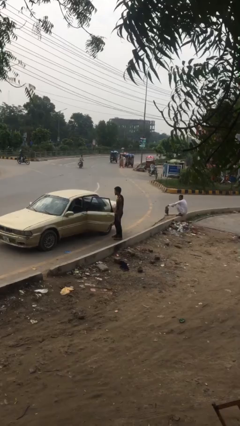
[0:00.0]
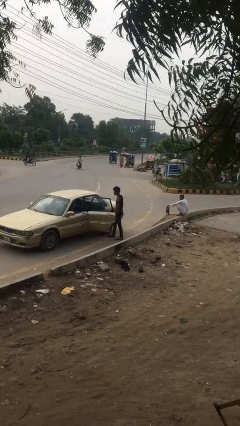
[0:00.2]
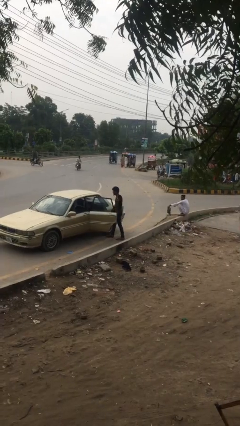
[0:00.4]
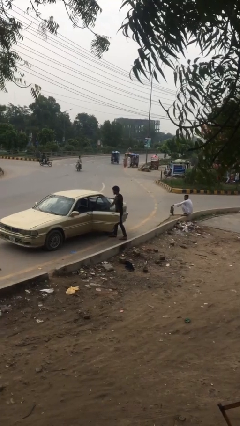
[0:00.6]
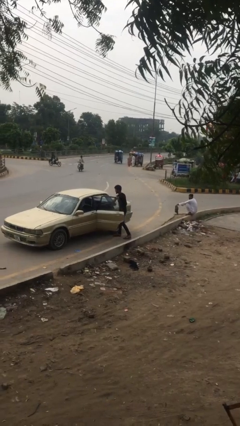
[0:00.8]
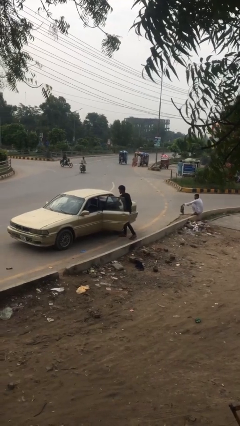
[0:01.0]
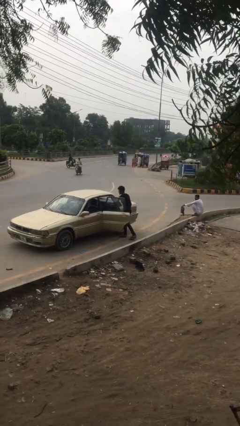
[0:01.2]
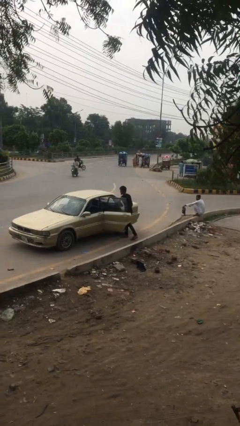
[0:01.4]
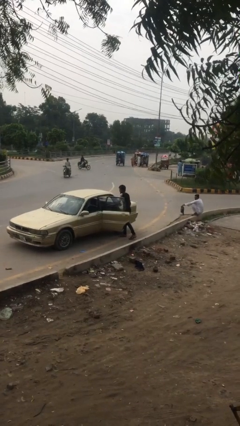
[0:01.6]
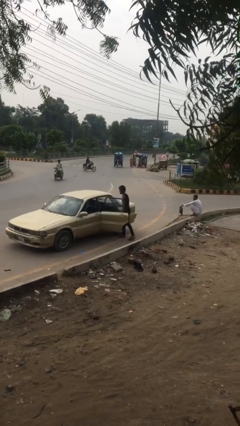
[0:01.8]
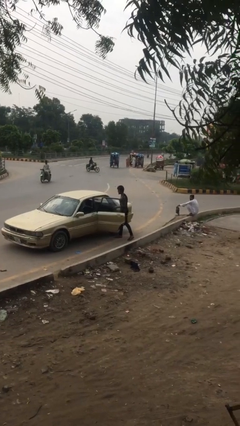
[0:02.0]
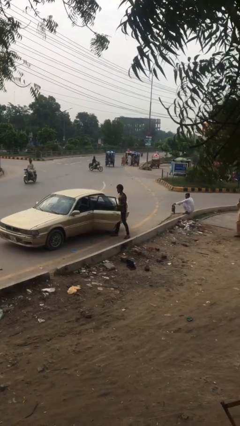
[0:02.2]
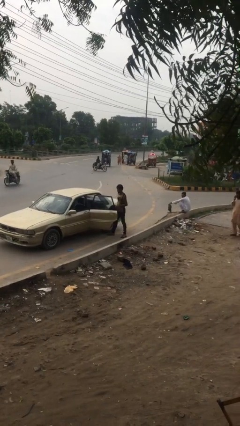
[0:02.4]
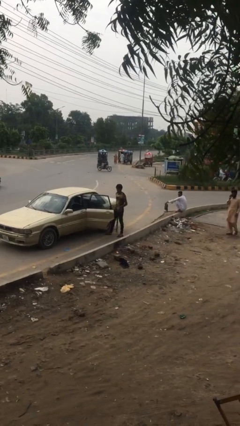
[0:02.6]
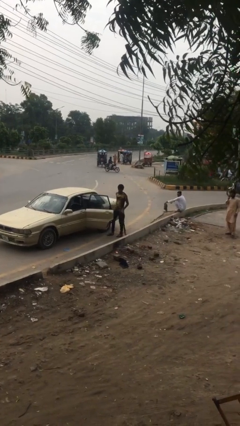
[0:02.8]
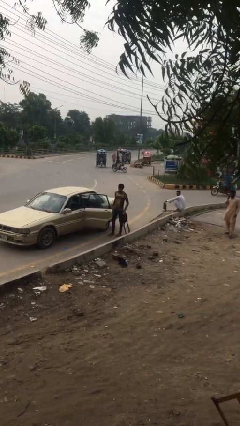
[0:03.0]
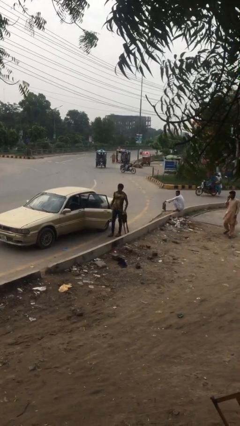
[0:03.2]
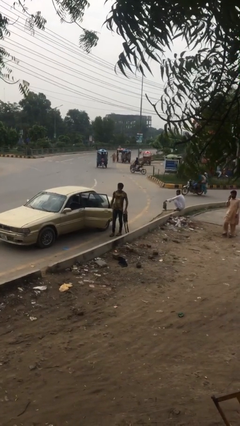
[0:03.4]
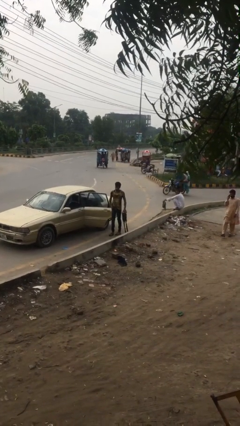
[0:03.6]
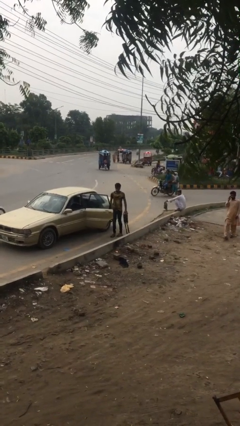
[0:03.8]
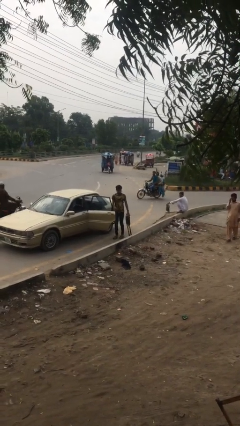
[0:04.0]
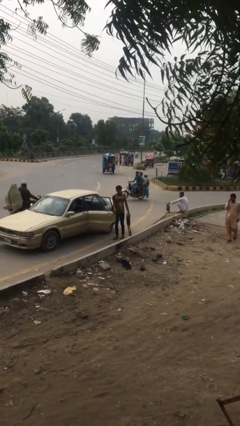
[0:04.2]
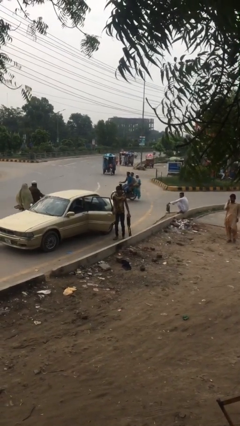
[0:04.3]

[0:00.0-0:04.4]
person unloads car

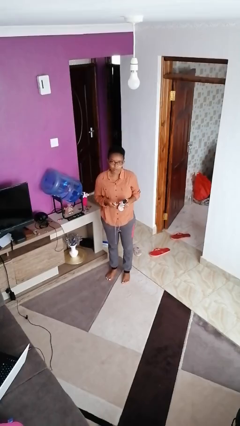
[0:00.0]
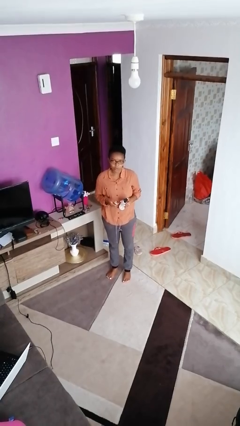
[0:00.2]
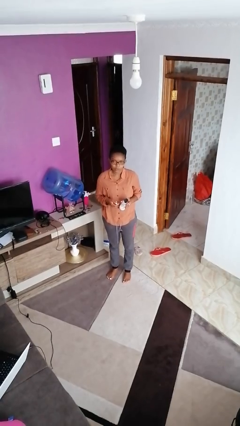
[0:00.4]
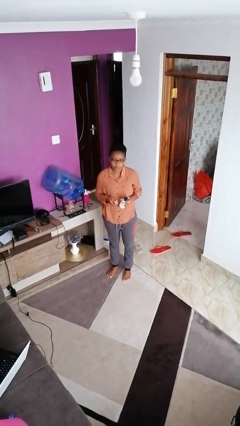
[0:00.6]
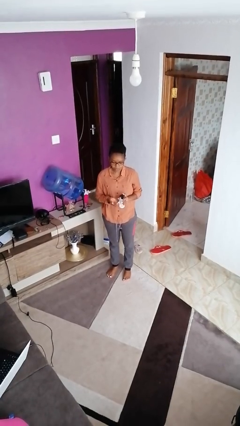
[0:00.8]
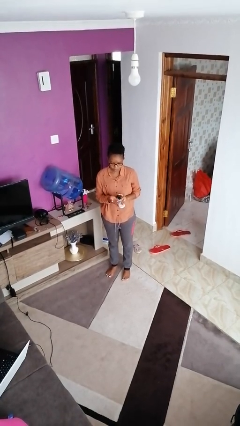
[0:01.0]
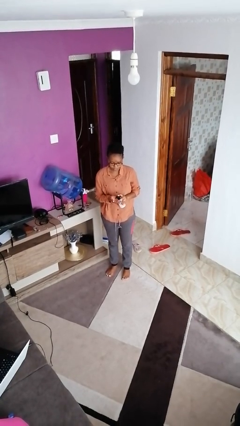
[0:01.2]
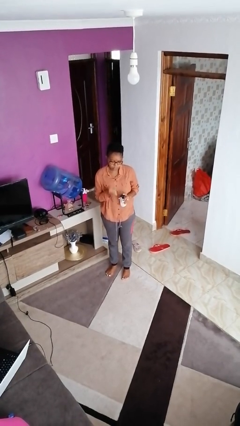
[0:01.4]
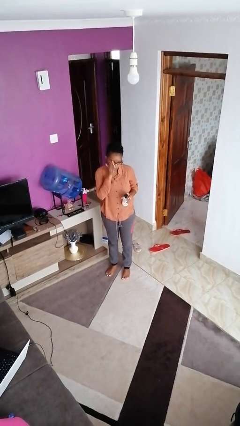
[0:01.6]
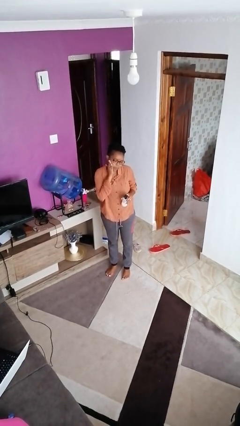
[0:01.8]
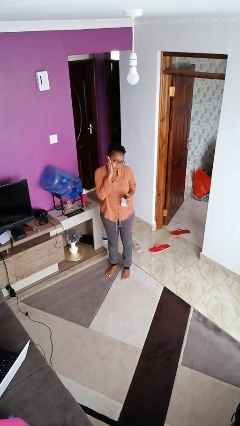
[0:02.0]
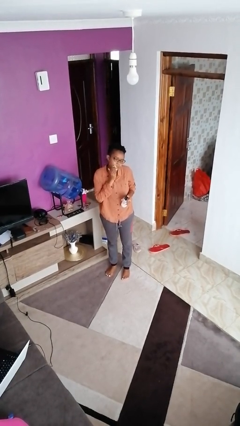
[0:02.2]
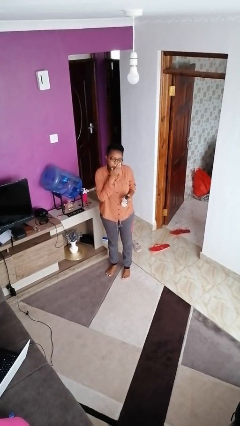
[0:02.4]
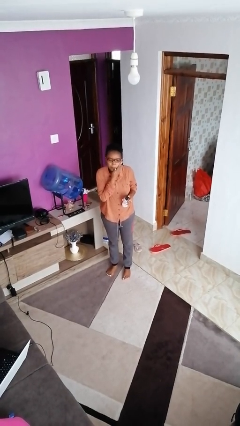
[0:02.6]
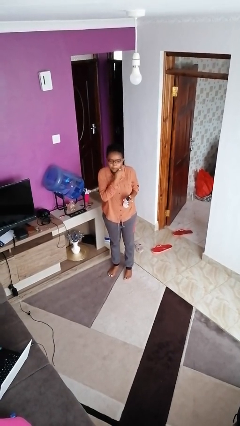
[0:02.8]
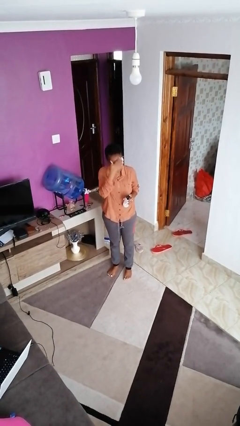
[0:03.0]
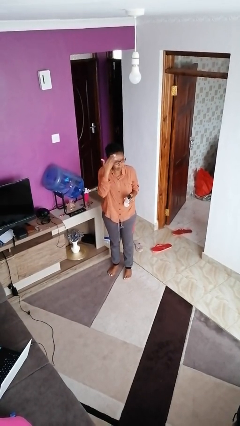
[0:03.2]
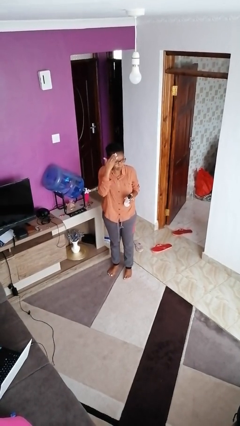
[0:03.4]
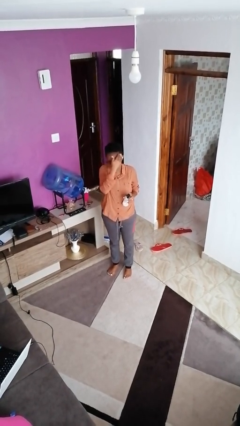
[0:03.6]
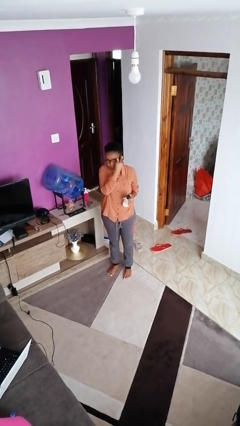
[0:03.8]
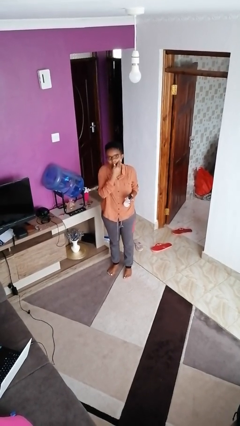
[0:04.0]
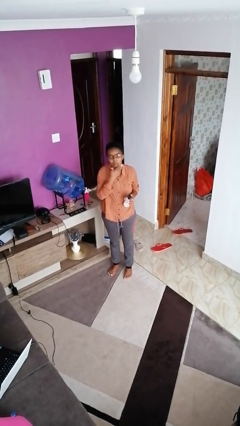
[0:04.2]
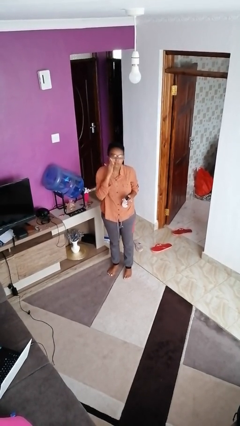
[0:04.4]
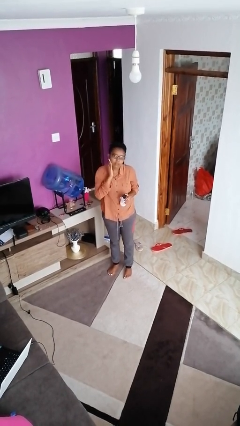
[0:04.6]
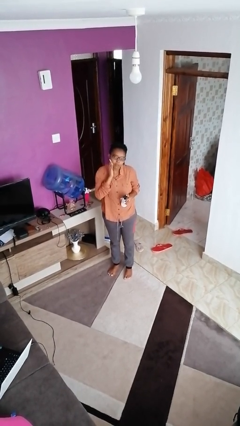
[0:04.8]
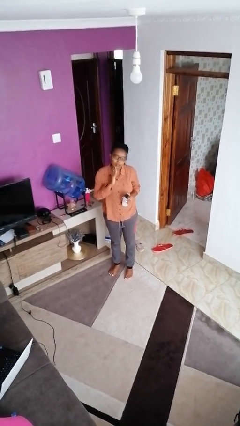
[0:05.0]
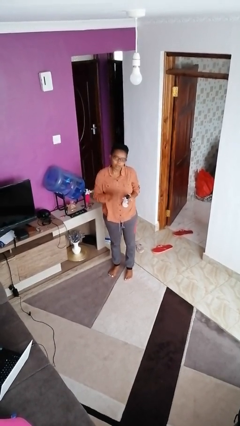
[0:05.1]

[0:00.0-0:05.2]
person applies facial moisturizer

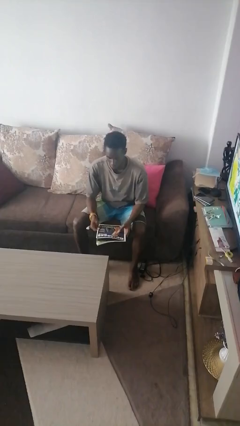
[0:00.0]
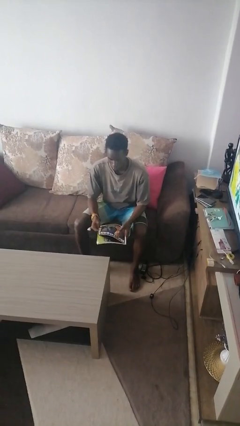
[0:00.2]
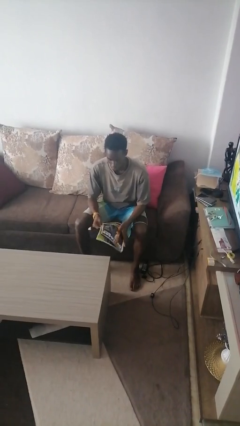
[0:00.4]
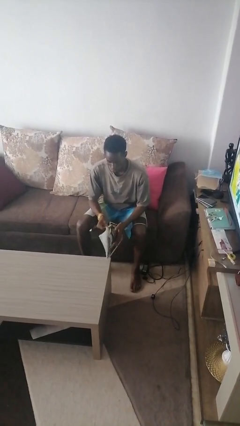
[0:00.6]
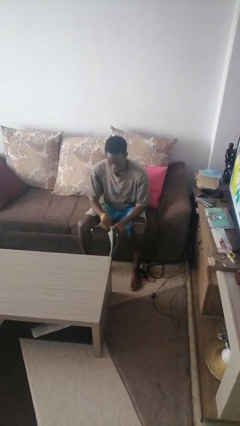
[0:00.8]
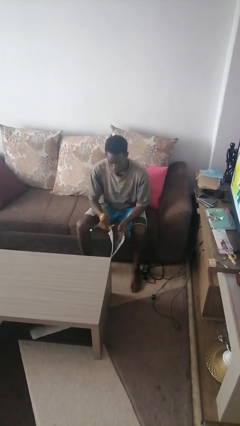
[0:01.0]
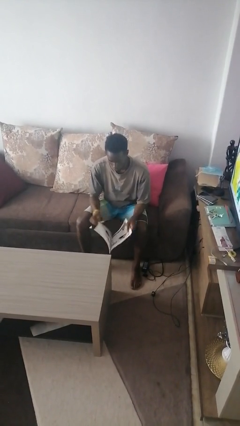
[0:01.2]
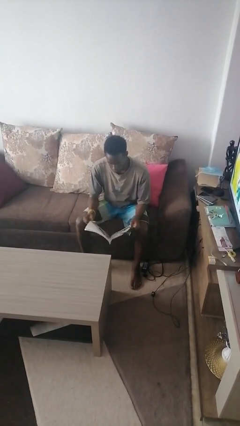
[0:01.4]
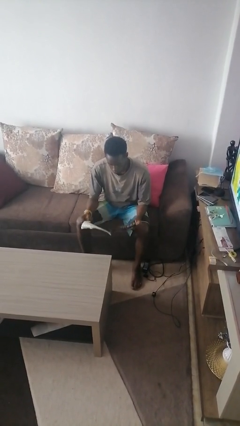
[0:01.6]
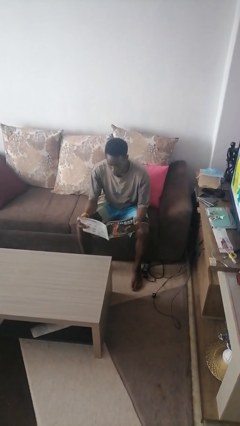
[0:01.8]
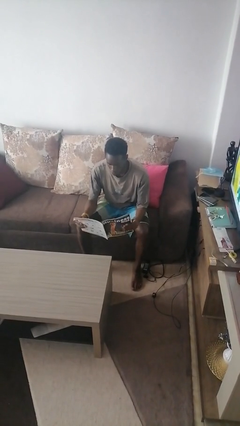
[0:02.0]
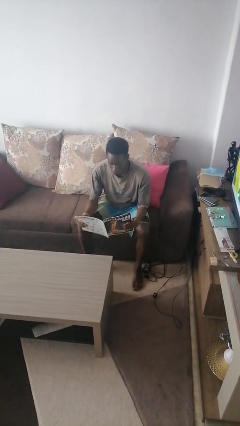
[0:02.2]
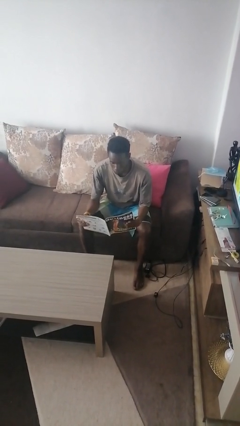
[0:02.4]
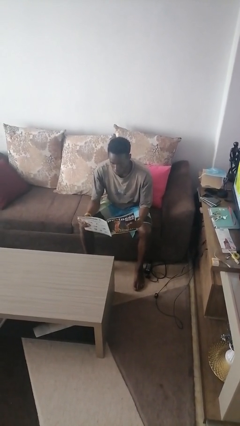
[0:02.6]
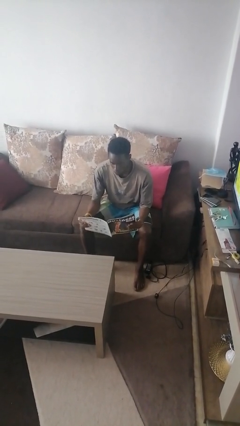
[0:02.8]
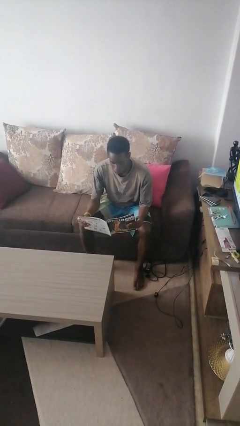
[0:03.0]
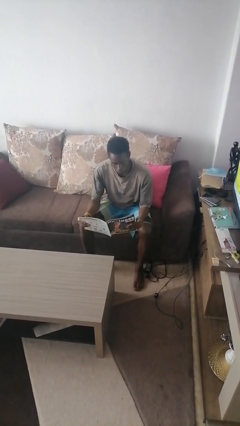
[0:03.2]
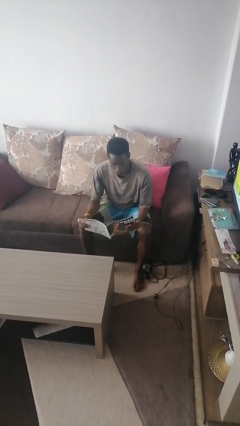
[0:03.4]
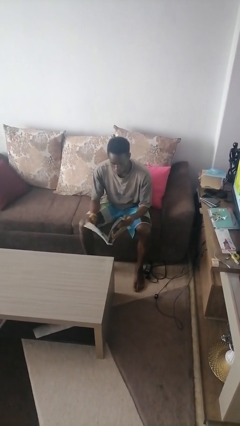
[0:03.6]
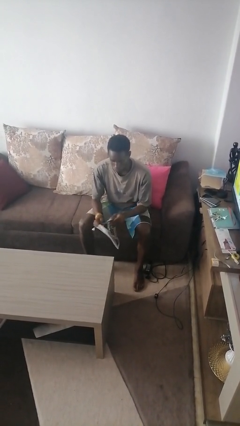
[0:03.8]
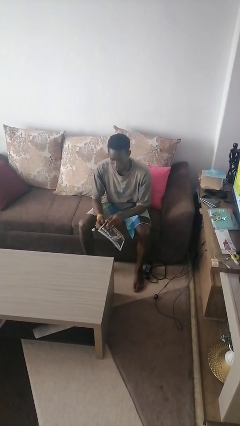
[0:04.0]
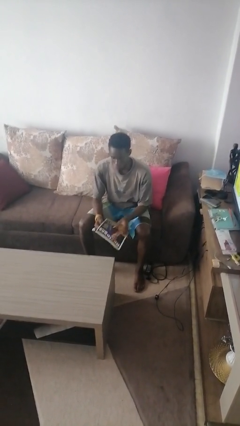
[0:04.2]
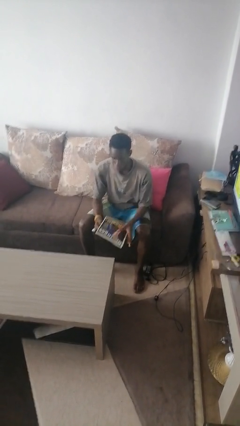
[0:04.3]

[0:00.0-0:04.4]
person reads magazine

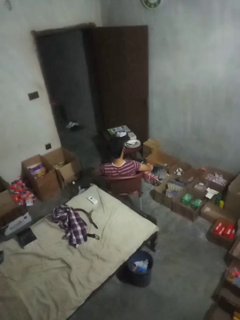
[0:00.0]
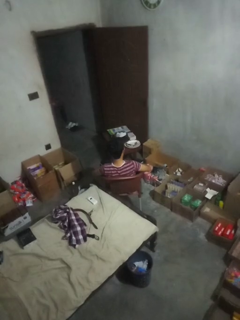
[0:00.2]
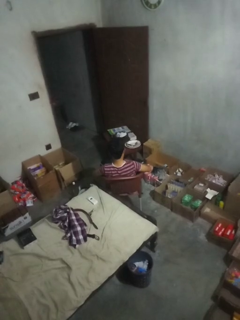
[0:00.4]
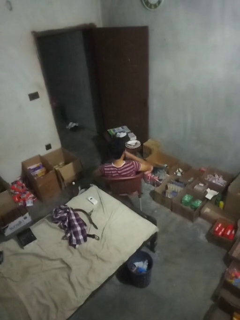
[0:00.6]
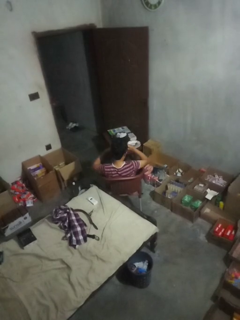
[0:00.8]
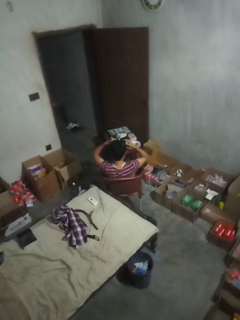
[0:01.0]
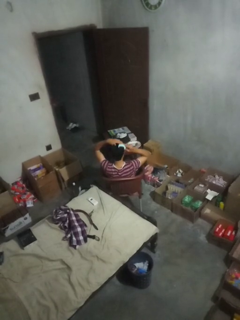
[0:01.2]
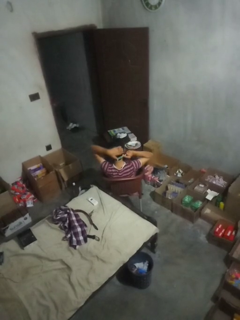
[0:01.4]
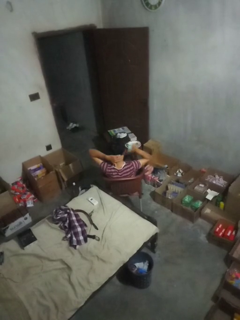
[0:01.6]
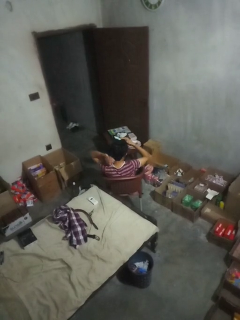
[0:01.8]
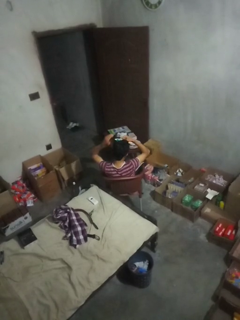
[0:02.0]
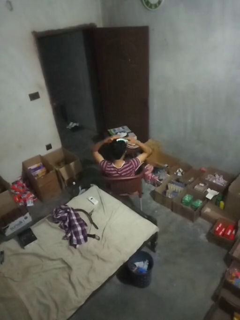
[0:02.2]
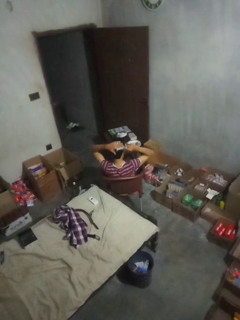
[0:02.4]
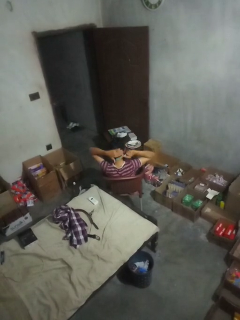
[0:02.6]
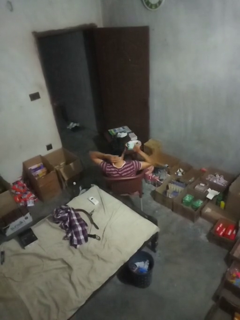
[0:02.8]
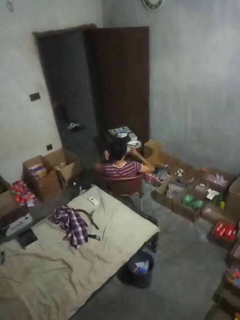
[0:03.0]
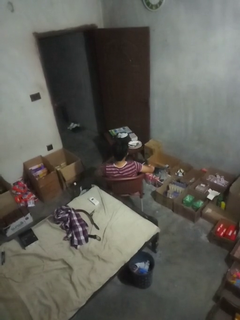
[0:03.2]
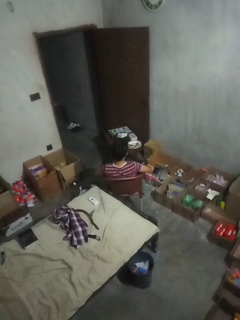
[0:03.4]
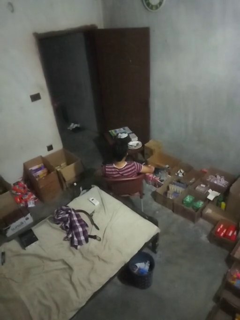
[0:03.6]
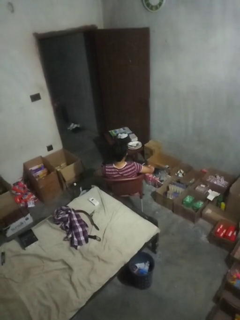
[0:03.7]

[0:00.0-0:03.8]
person brushes hair

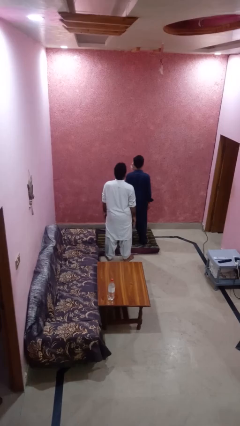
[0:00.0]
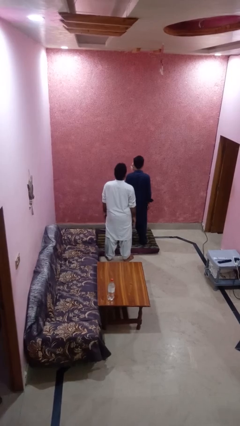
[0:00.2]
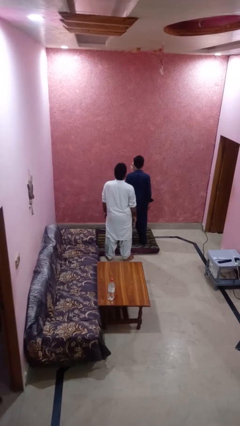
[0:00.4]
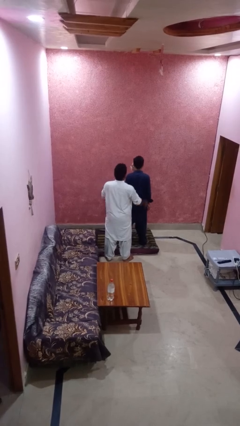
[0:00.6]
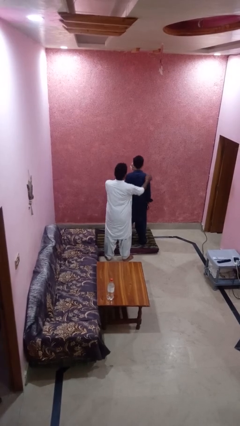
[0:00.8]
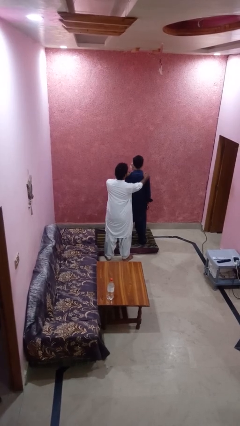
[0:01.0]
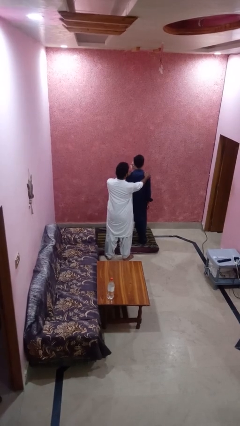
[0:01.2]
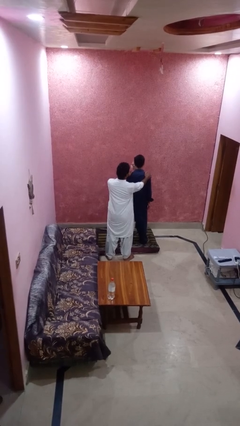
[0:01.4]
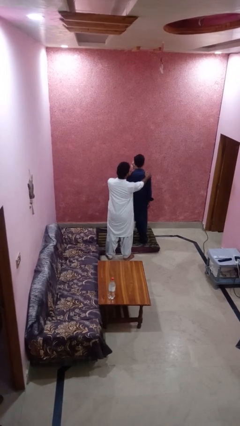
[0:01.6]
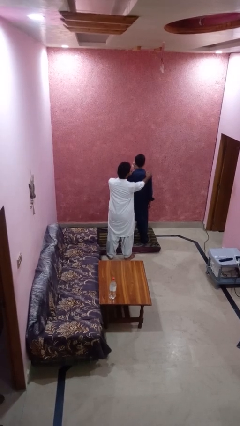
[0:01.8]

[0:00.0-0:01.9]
person grabs person by shoulder
